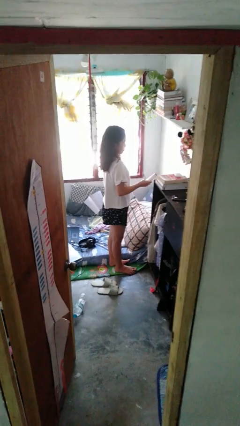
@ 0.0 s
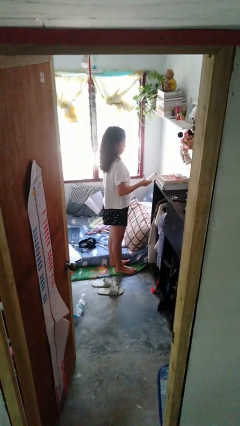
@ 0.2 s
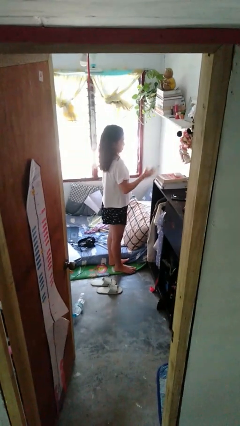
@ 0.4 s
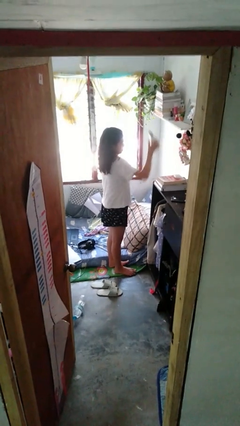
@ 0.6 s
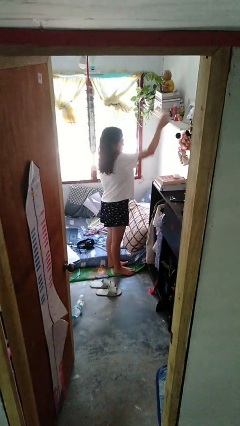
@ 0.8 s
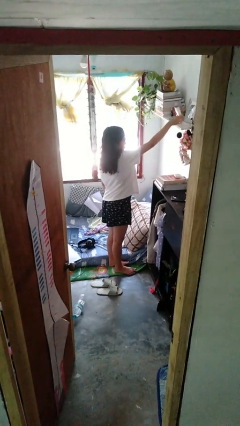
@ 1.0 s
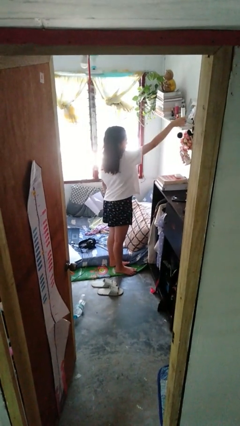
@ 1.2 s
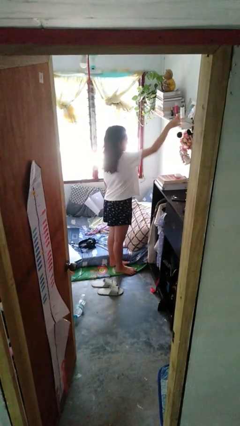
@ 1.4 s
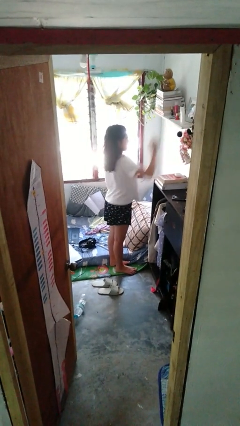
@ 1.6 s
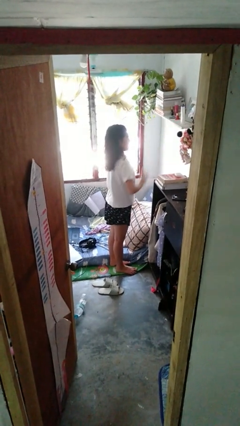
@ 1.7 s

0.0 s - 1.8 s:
person puts down object on shelf

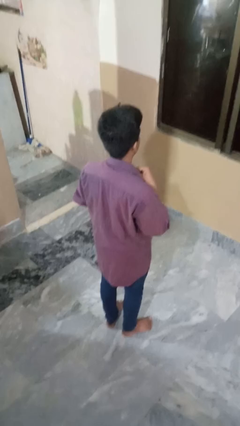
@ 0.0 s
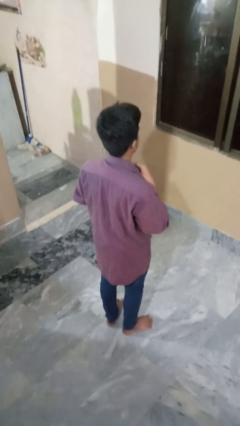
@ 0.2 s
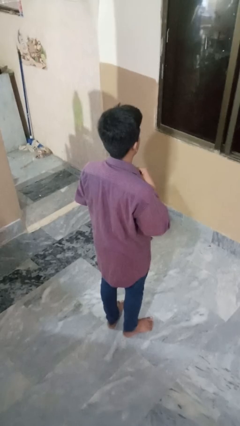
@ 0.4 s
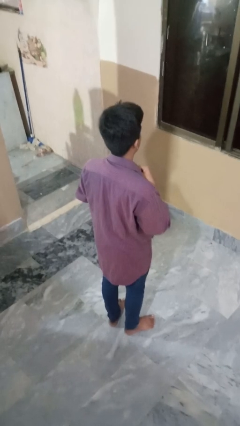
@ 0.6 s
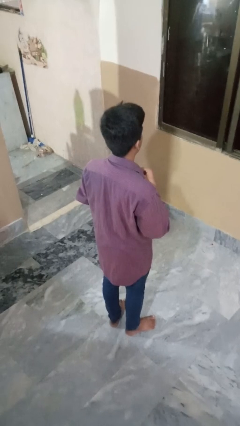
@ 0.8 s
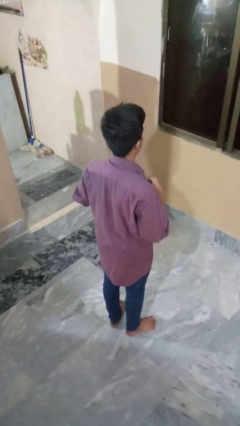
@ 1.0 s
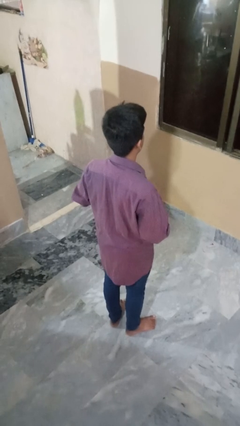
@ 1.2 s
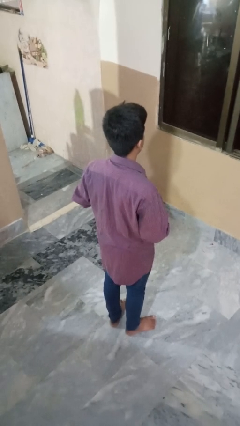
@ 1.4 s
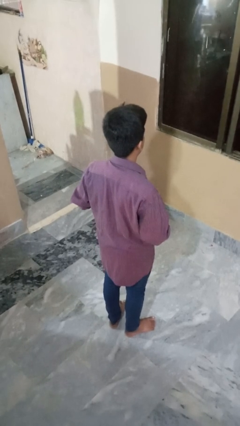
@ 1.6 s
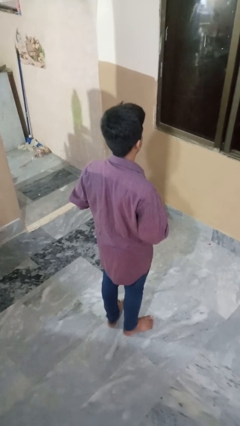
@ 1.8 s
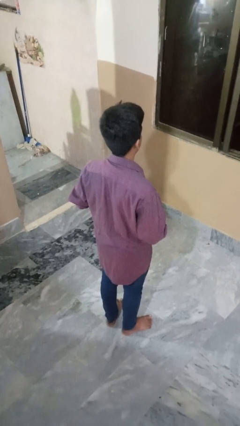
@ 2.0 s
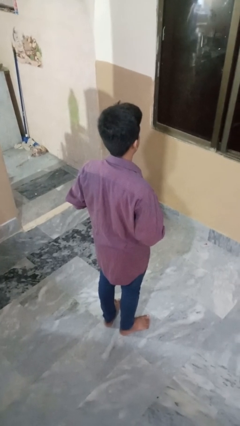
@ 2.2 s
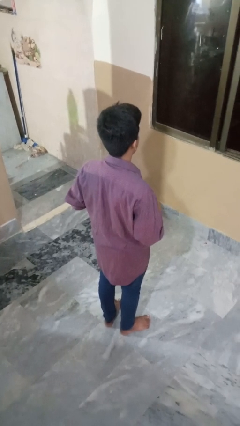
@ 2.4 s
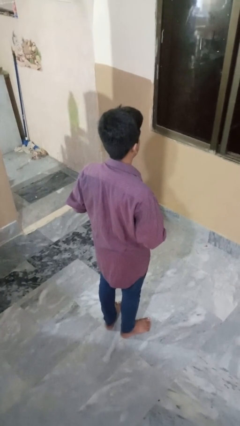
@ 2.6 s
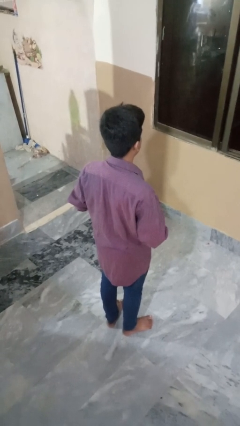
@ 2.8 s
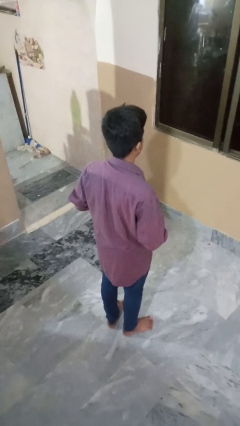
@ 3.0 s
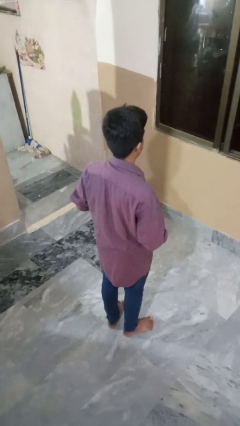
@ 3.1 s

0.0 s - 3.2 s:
person unbuttons shirt

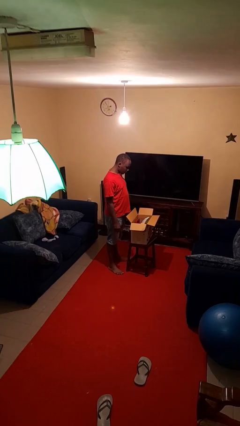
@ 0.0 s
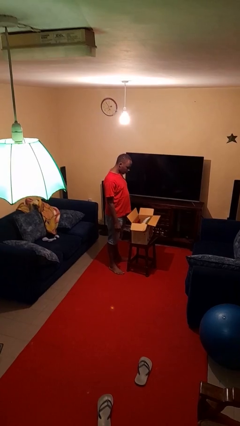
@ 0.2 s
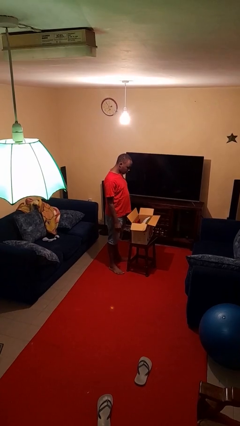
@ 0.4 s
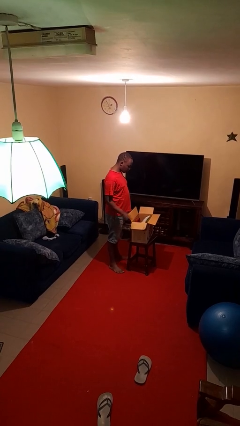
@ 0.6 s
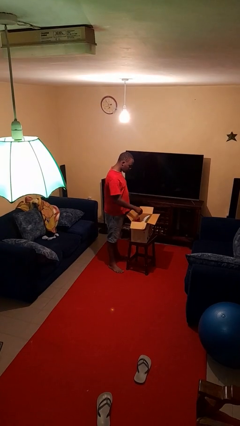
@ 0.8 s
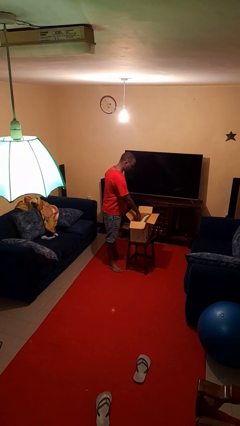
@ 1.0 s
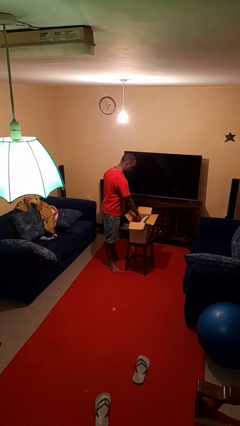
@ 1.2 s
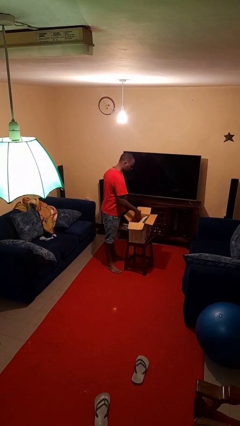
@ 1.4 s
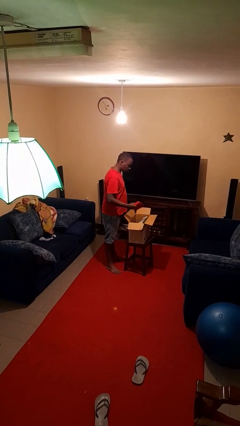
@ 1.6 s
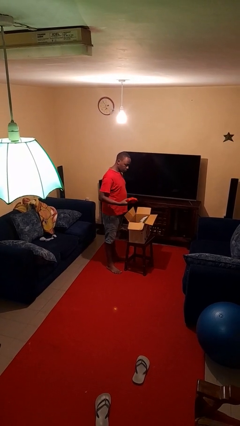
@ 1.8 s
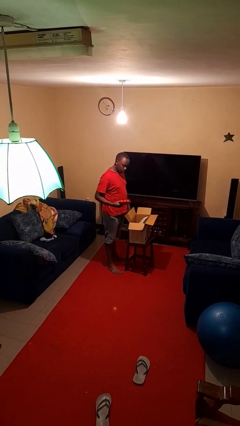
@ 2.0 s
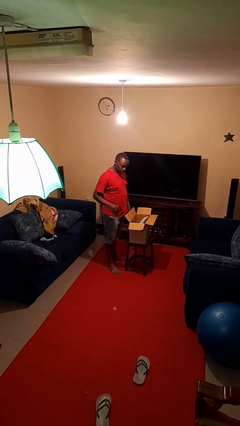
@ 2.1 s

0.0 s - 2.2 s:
person takes object from box

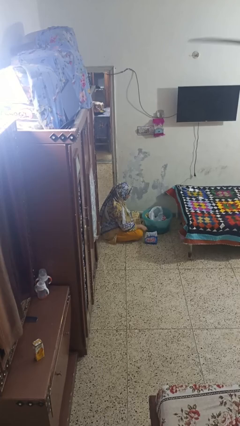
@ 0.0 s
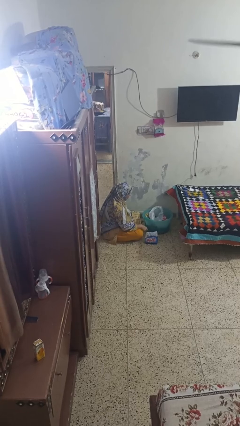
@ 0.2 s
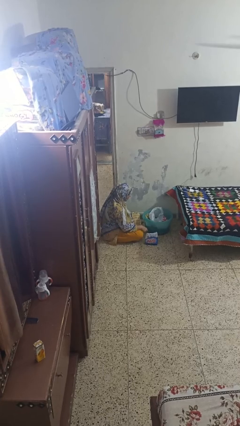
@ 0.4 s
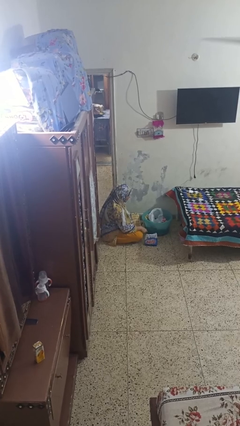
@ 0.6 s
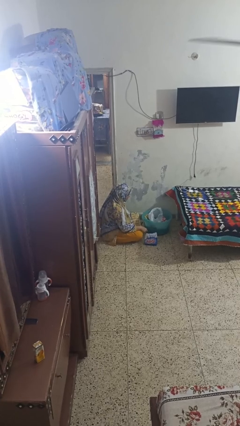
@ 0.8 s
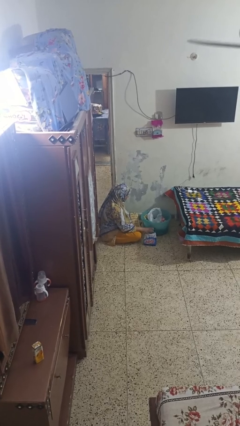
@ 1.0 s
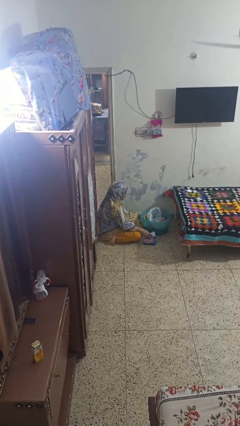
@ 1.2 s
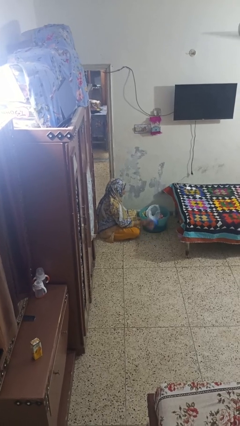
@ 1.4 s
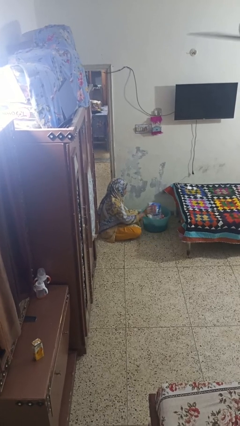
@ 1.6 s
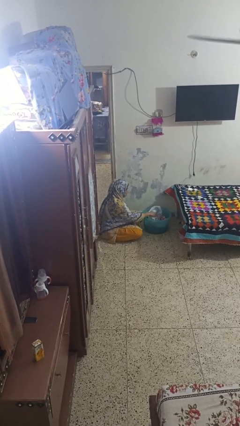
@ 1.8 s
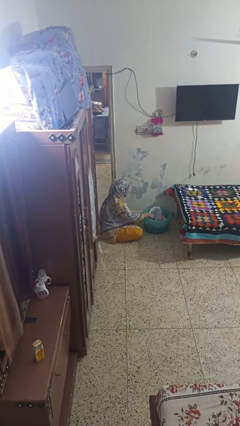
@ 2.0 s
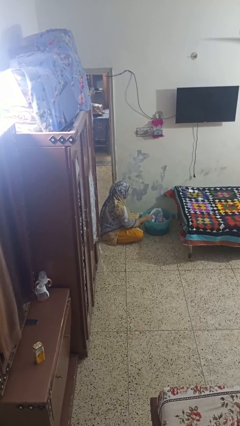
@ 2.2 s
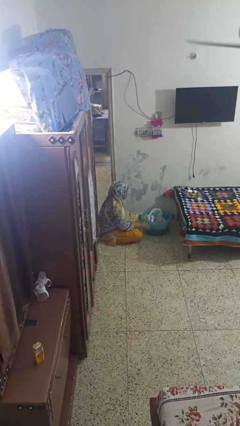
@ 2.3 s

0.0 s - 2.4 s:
person puts object into basket

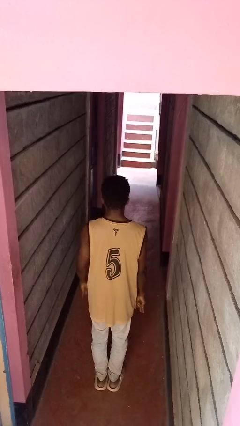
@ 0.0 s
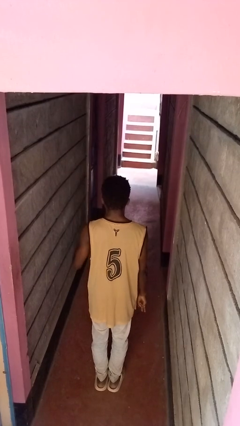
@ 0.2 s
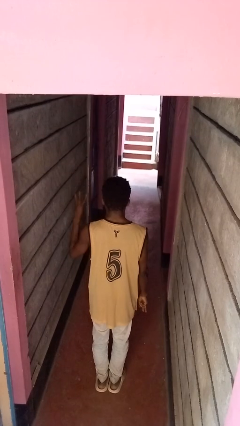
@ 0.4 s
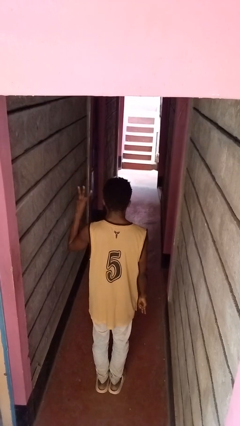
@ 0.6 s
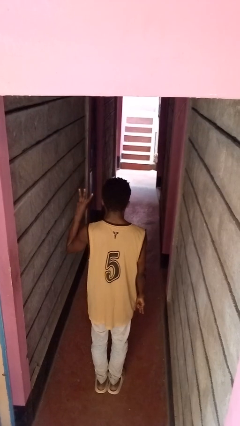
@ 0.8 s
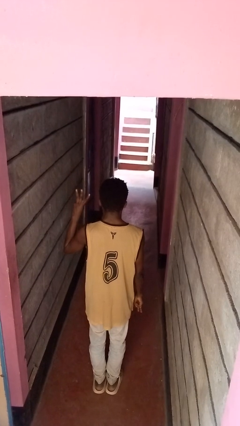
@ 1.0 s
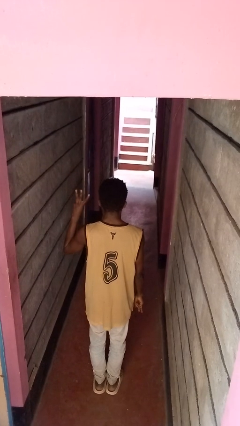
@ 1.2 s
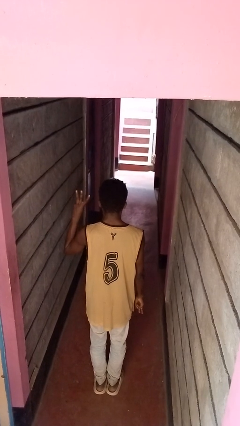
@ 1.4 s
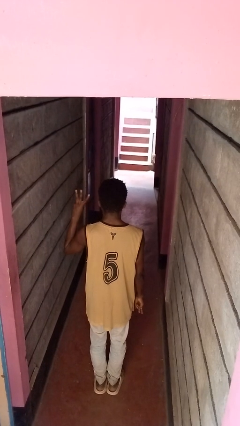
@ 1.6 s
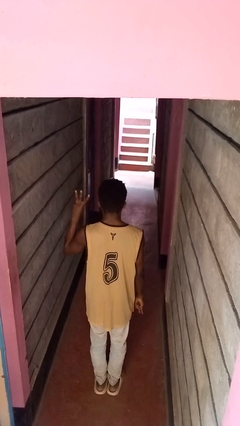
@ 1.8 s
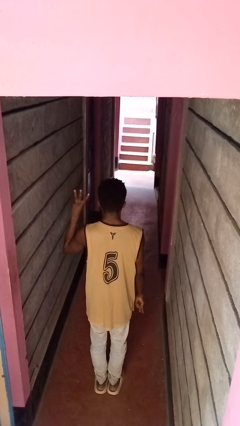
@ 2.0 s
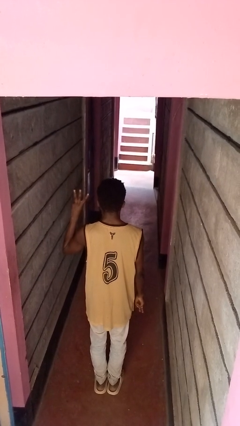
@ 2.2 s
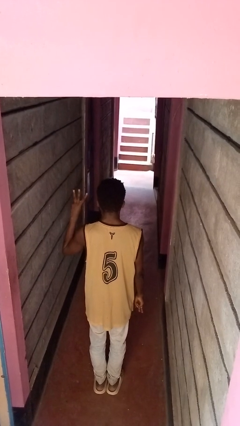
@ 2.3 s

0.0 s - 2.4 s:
person gestures number three

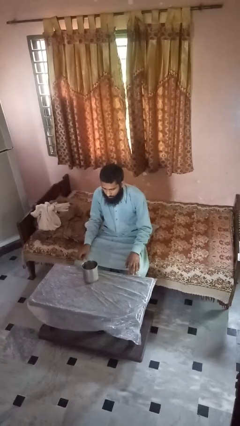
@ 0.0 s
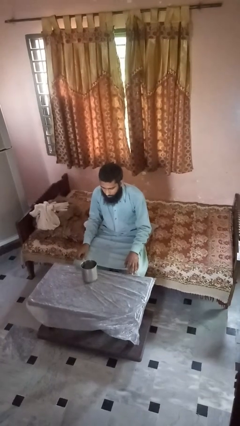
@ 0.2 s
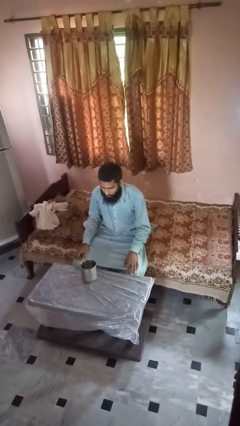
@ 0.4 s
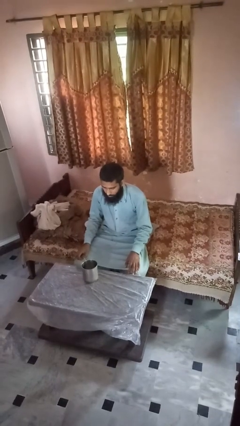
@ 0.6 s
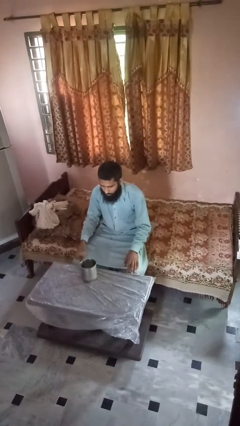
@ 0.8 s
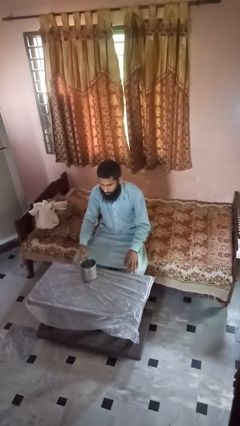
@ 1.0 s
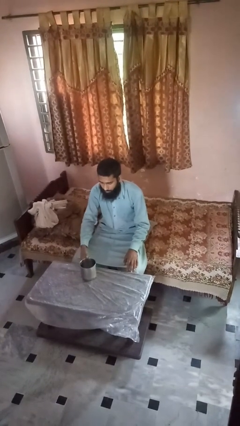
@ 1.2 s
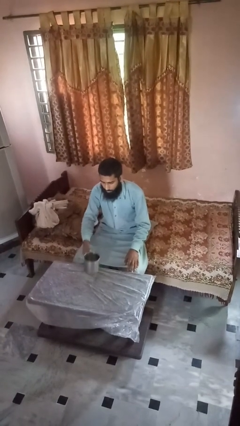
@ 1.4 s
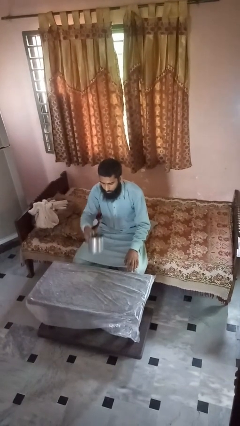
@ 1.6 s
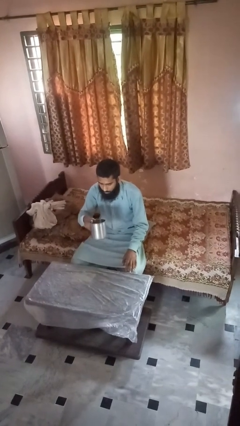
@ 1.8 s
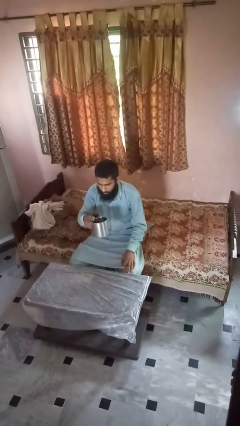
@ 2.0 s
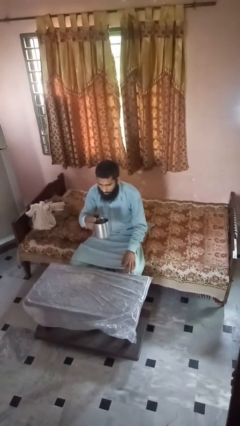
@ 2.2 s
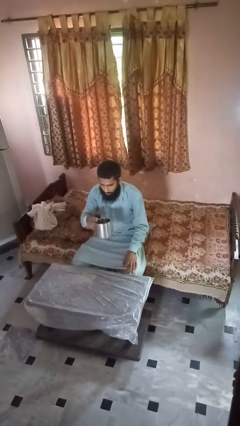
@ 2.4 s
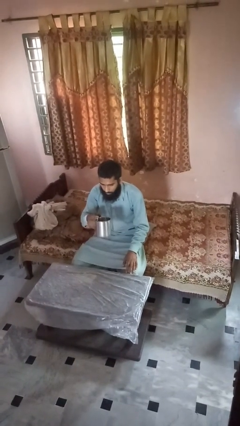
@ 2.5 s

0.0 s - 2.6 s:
person picks up object from table

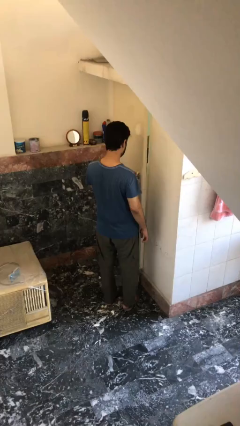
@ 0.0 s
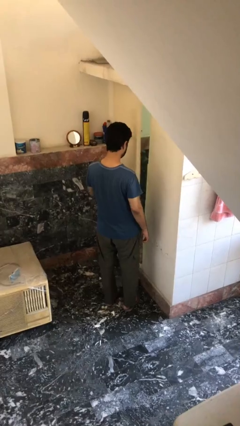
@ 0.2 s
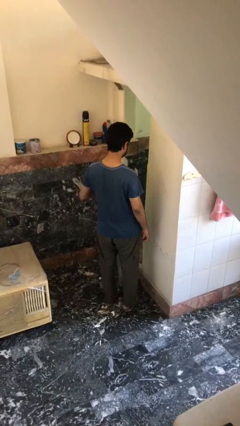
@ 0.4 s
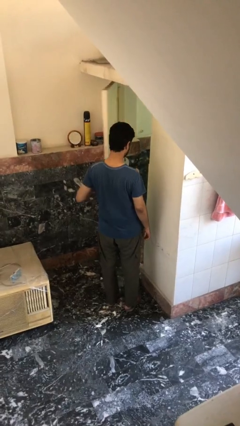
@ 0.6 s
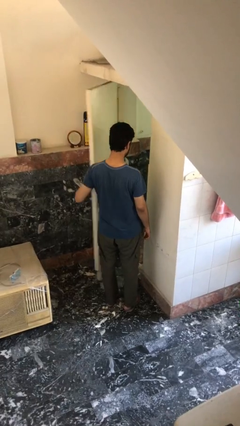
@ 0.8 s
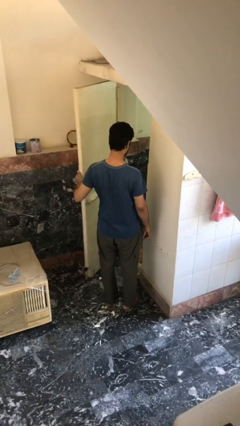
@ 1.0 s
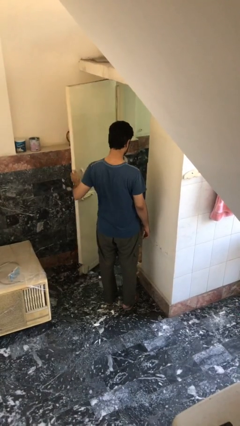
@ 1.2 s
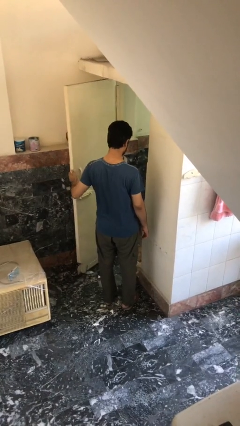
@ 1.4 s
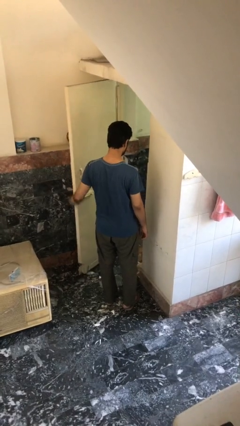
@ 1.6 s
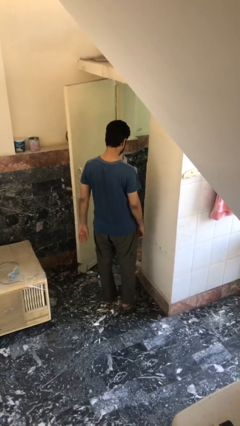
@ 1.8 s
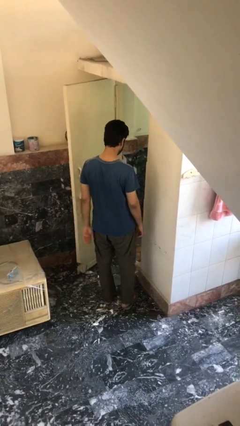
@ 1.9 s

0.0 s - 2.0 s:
person opens facility door
